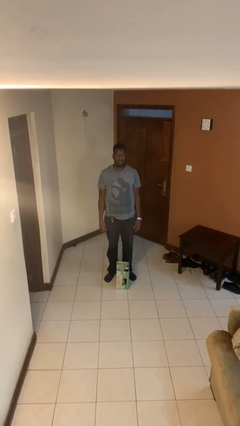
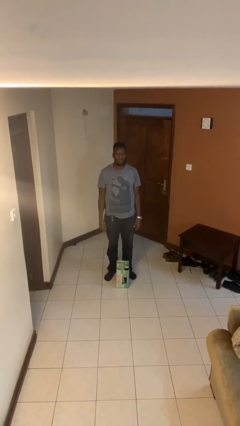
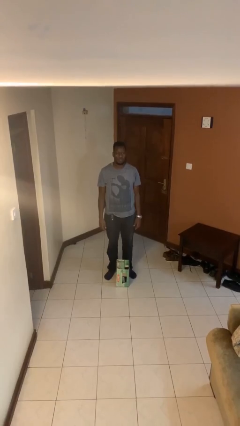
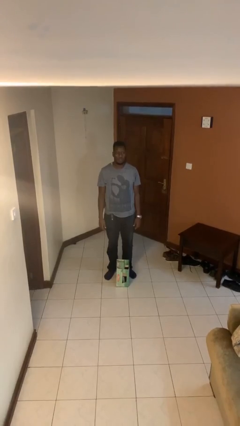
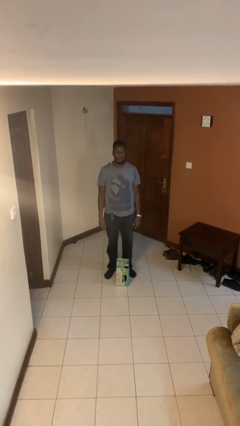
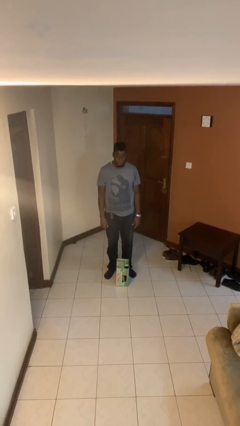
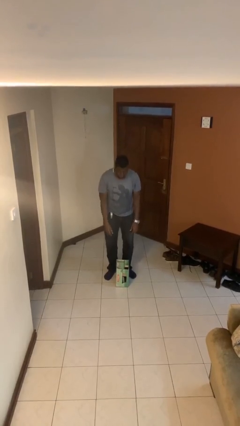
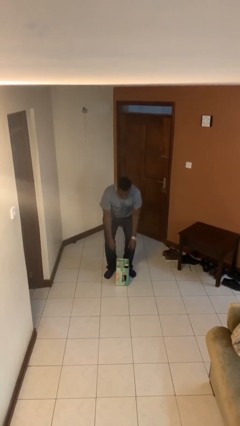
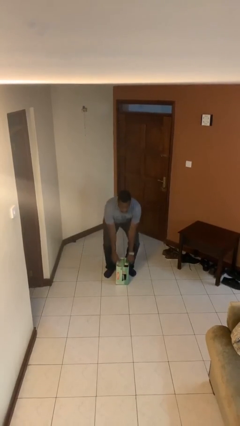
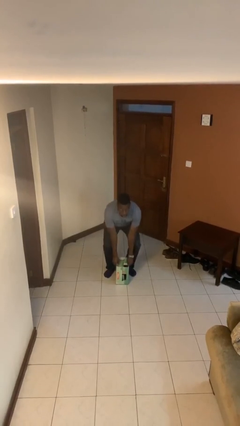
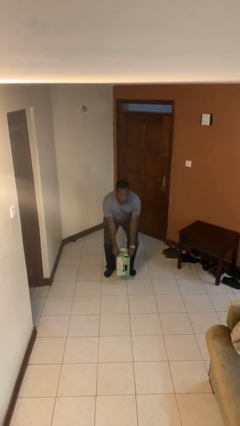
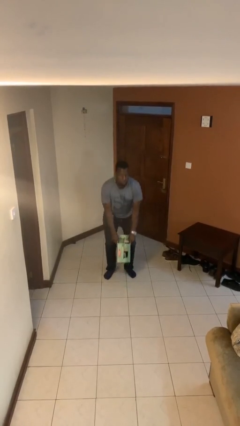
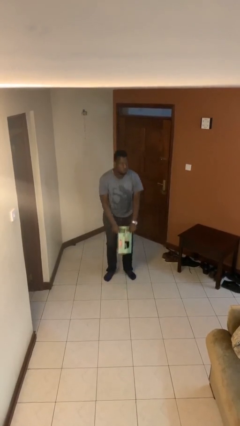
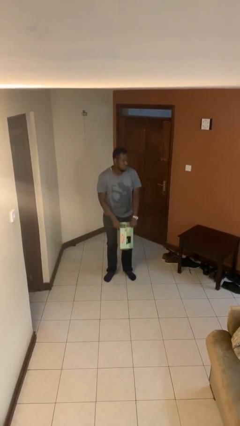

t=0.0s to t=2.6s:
person picks up object from floor

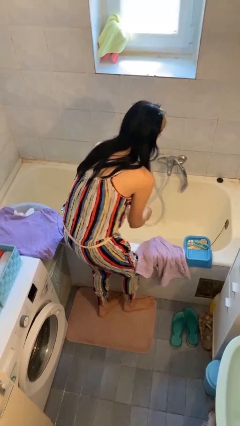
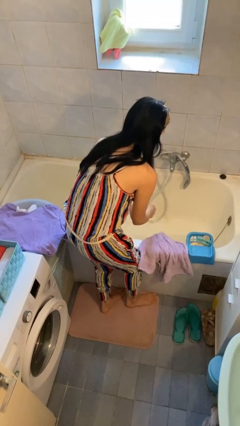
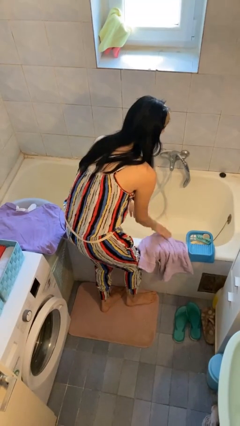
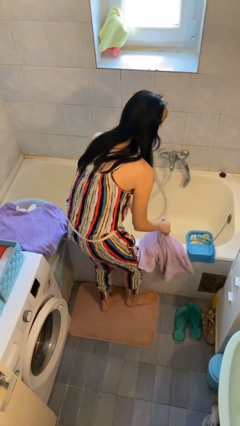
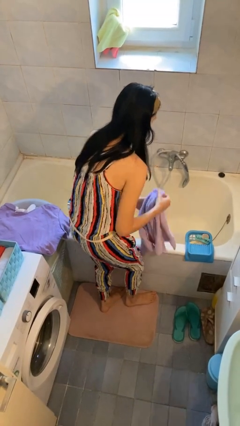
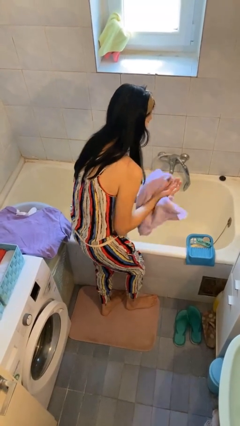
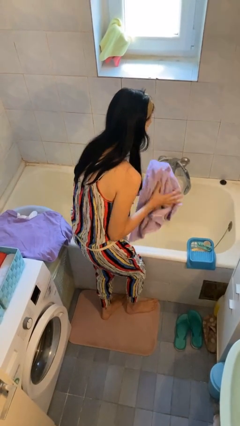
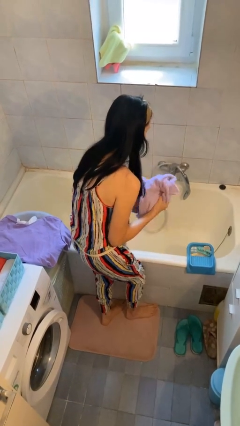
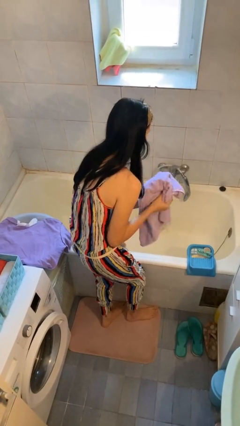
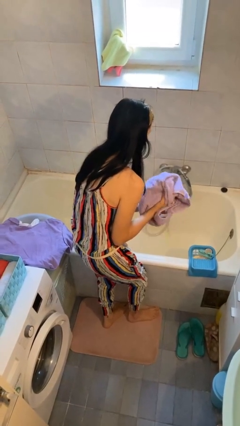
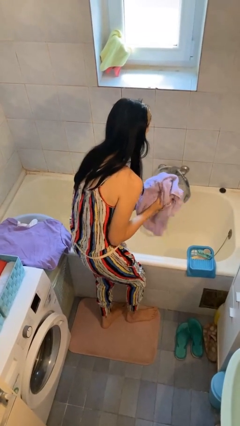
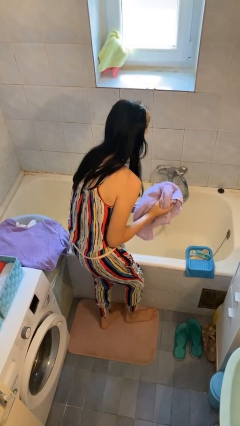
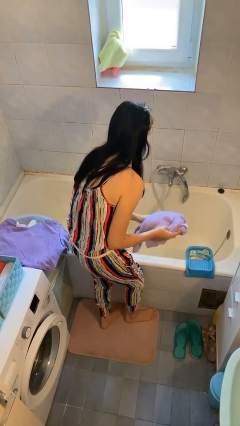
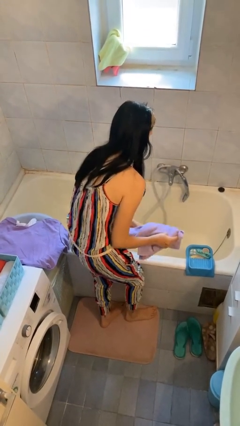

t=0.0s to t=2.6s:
person dries hands with towel

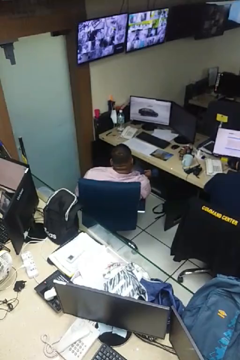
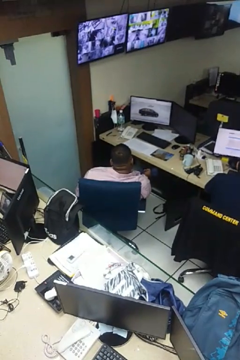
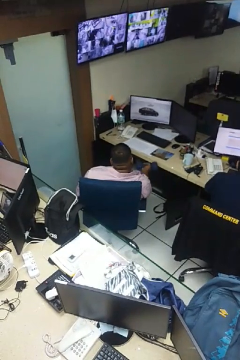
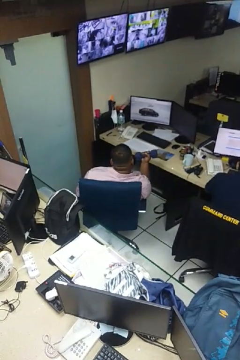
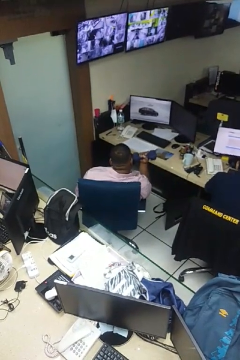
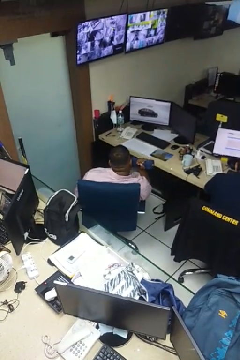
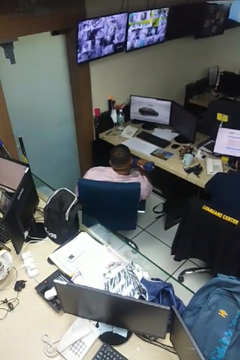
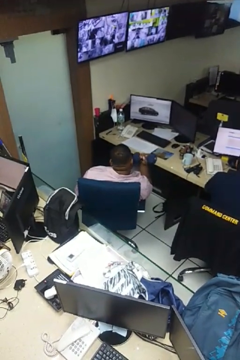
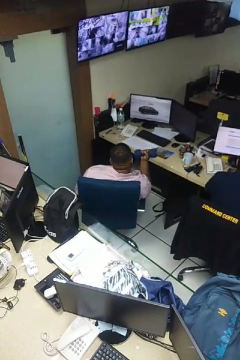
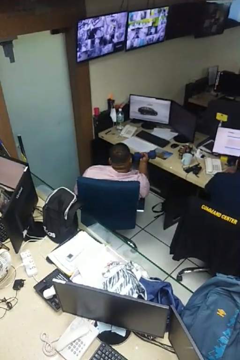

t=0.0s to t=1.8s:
person lifts dumbbells

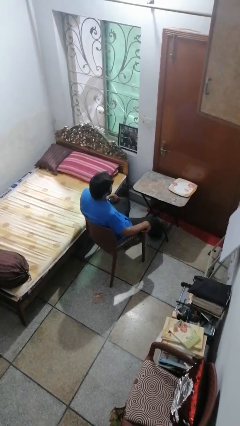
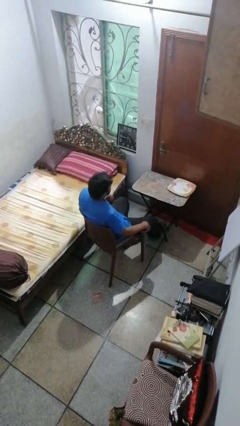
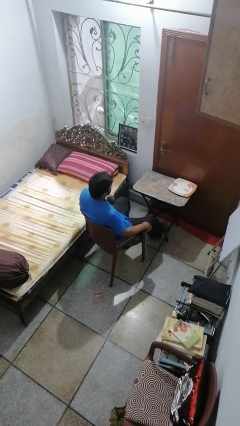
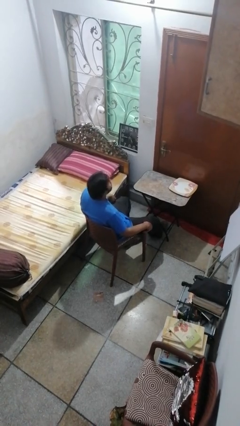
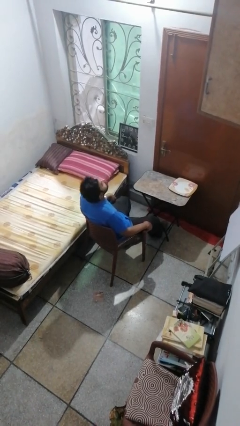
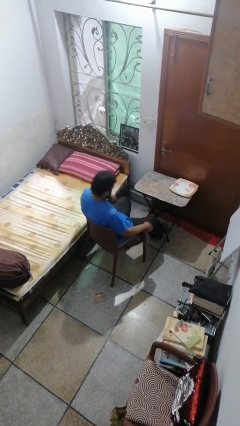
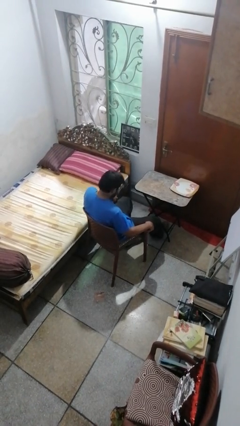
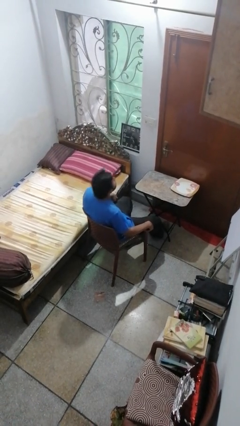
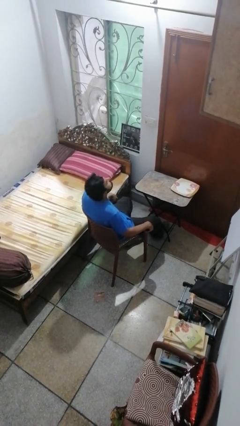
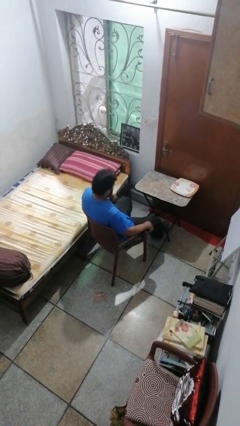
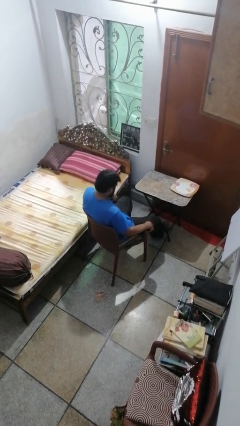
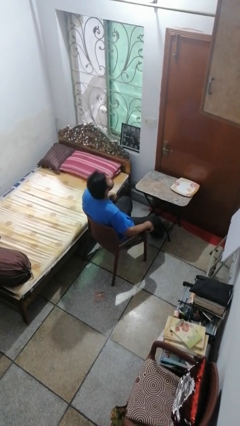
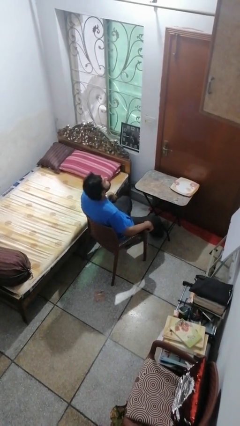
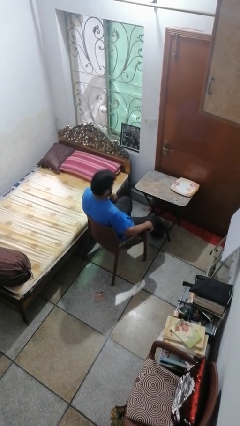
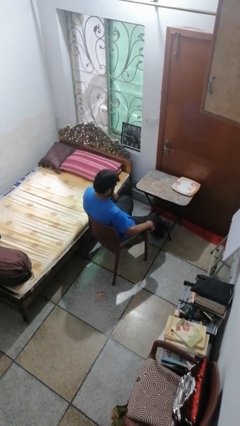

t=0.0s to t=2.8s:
person nods head

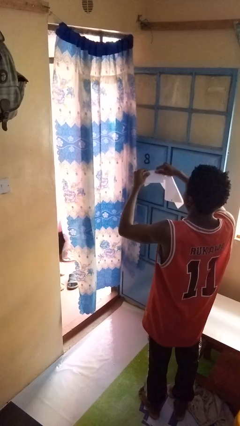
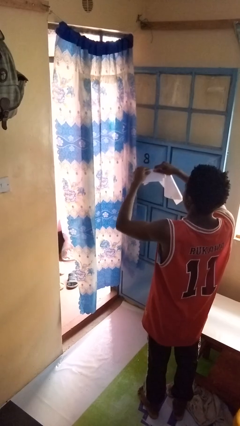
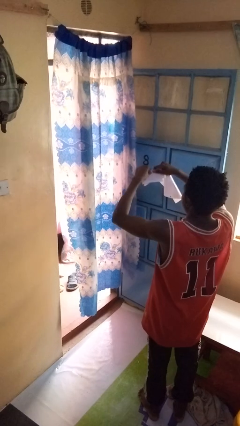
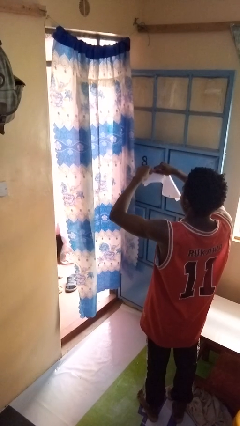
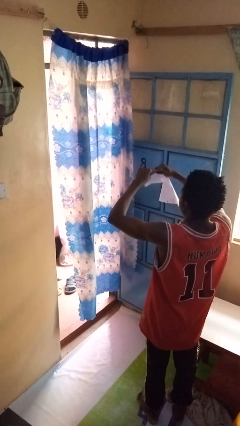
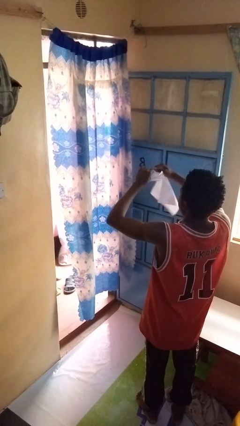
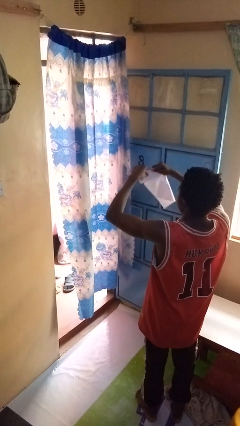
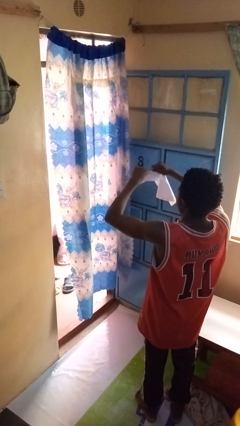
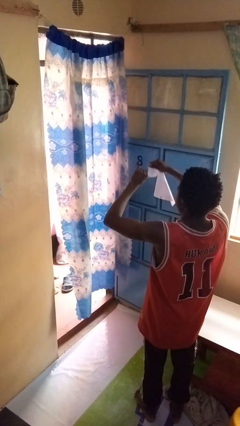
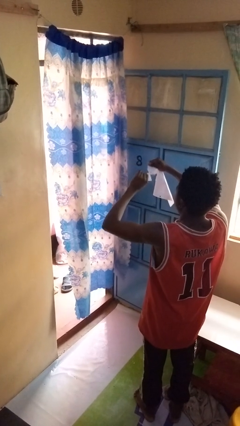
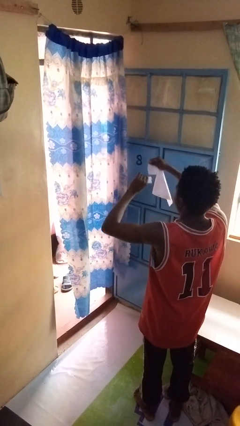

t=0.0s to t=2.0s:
person tears paper

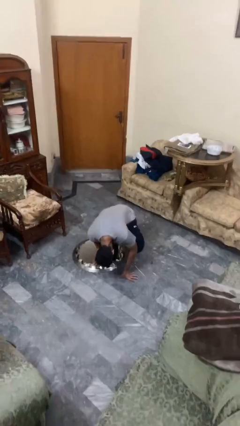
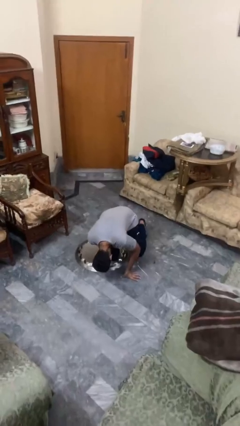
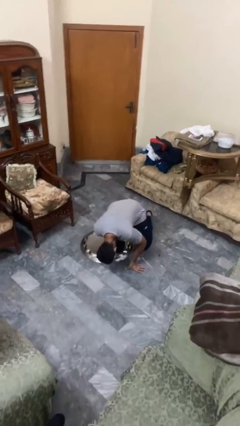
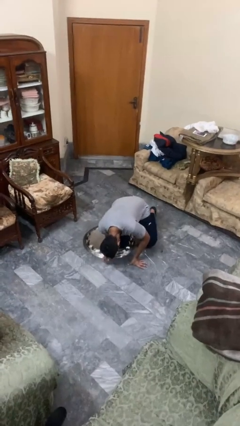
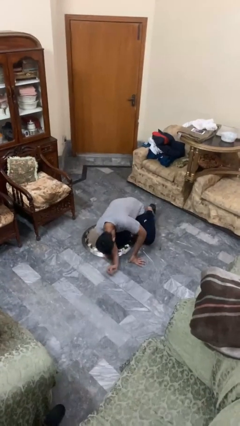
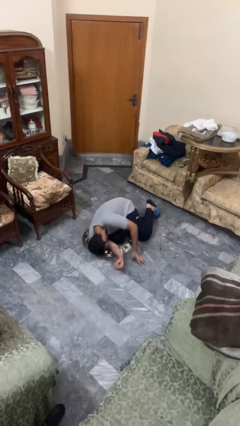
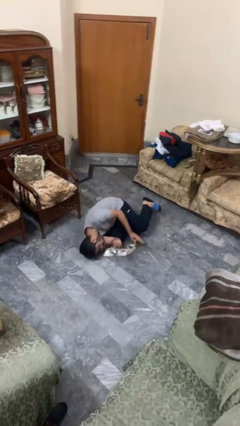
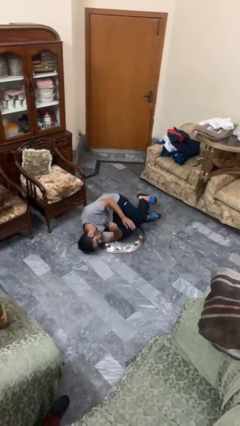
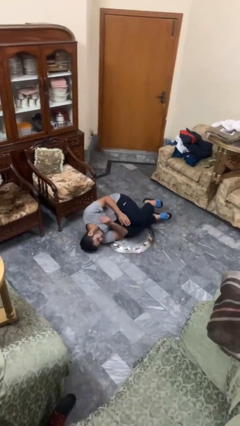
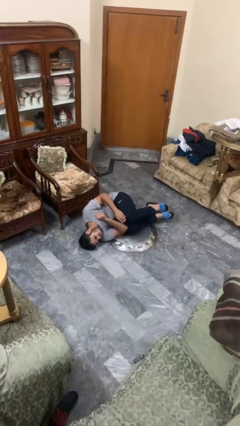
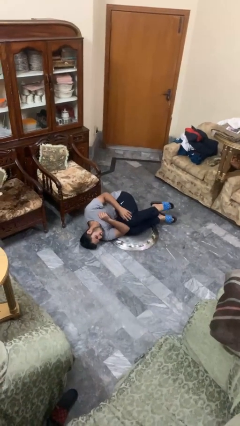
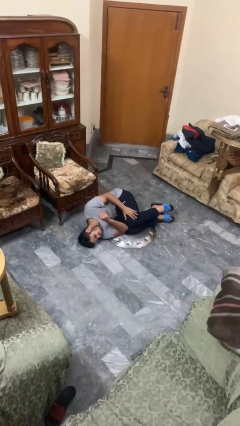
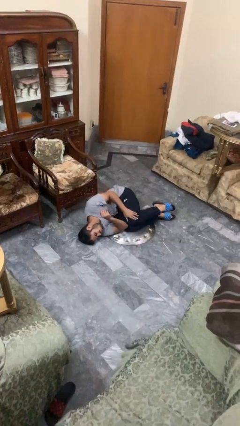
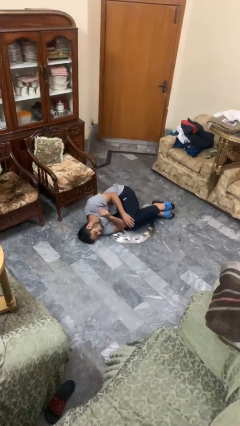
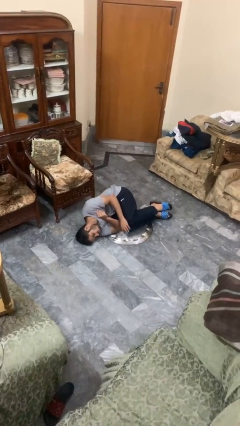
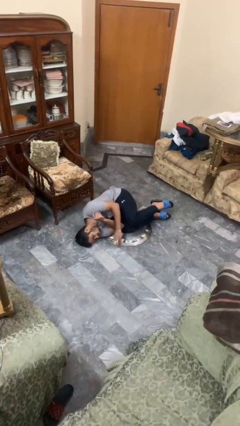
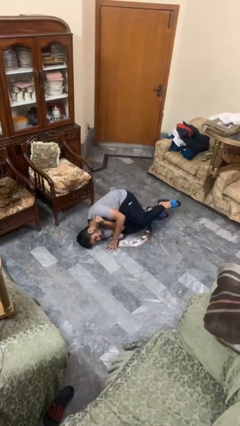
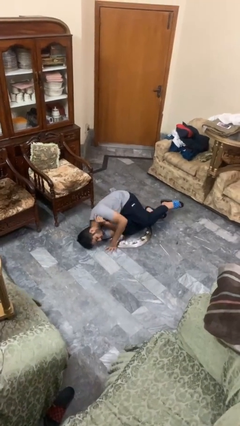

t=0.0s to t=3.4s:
person lies down on floor

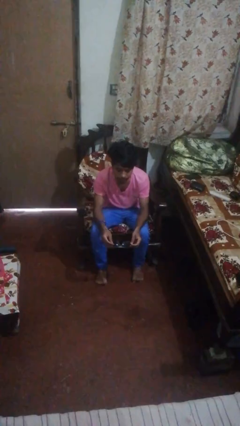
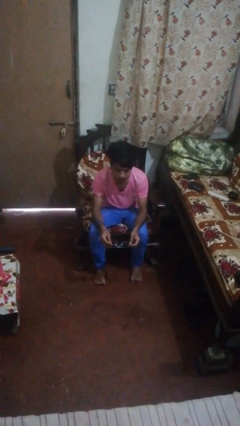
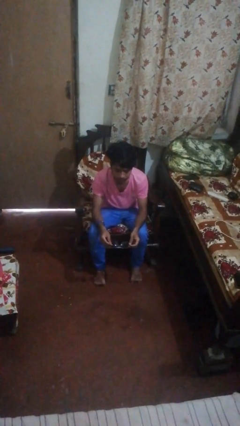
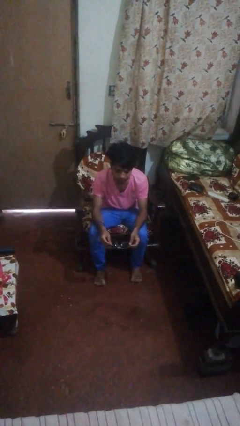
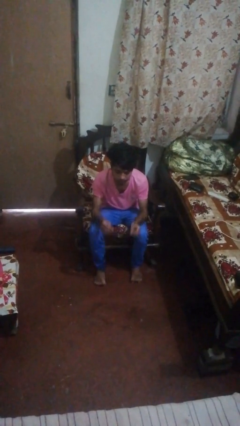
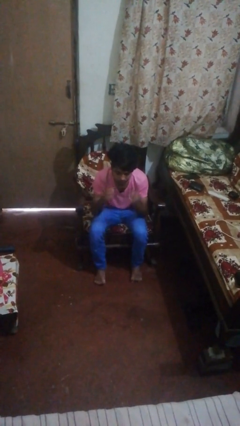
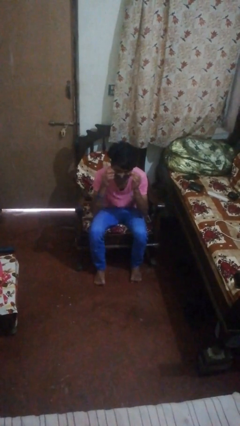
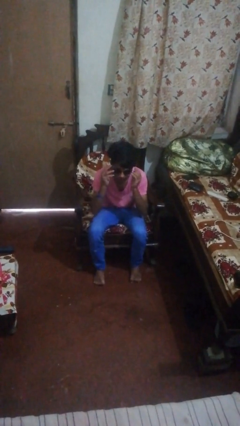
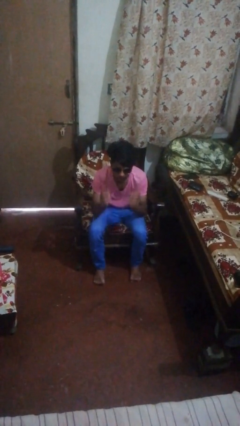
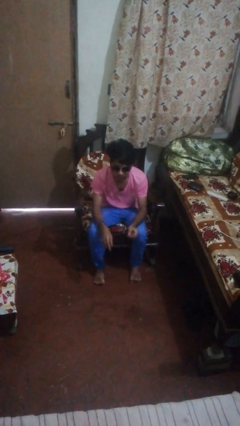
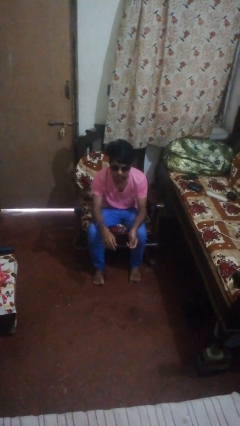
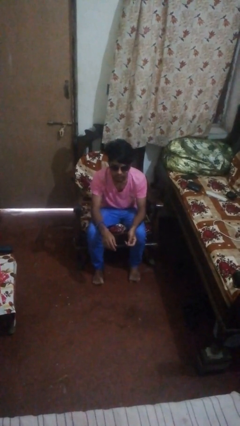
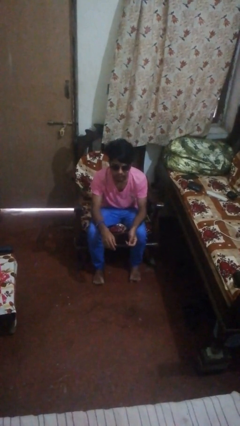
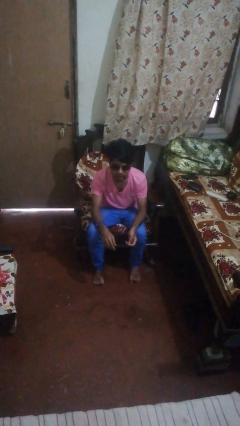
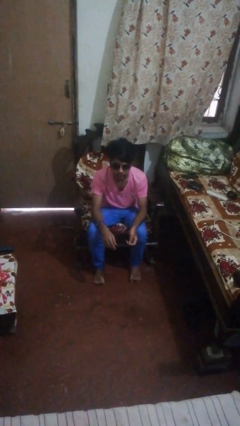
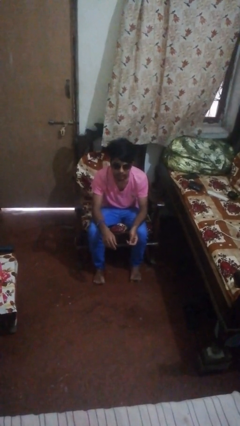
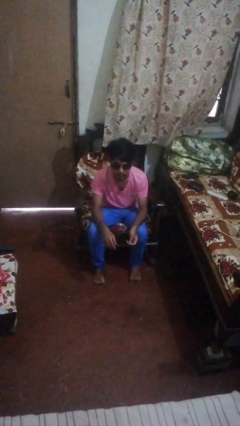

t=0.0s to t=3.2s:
person puts on sunglasses
